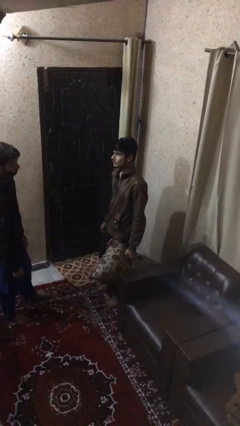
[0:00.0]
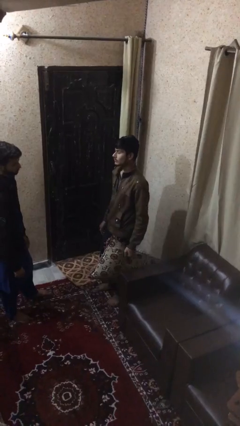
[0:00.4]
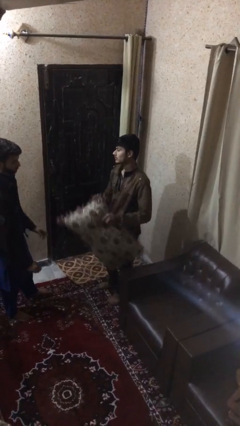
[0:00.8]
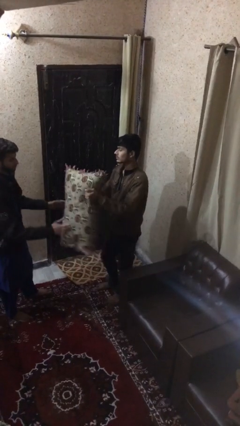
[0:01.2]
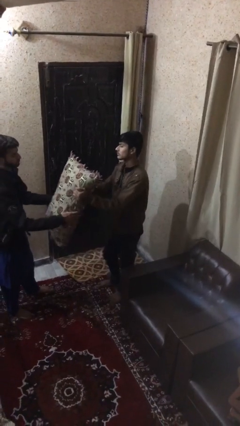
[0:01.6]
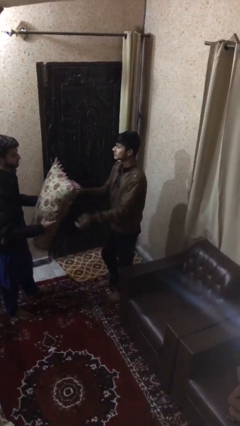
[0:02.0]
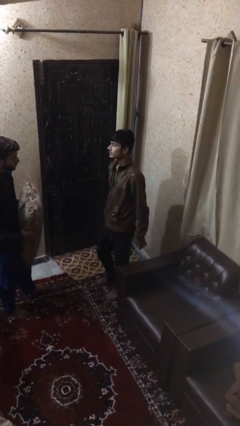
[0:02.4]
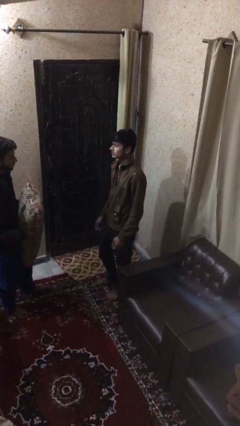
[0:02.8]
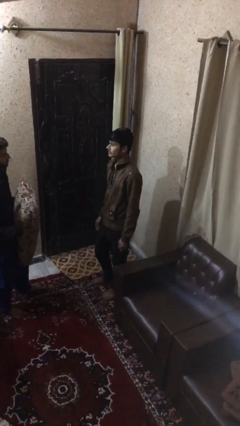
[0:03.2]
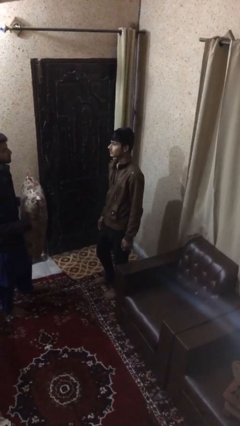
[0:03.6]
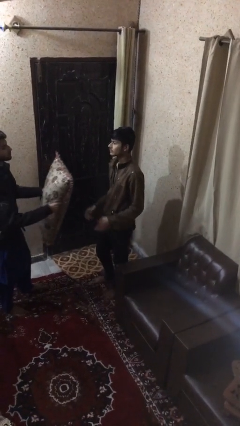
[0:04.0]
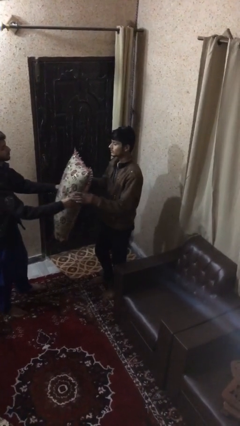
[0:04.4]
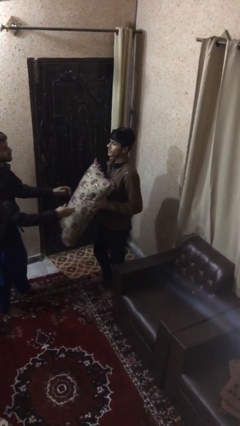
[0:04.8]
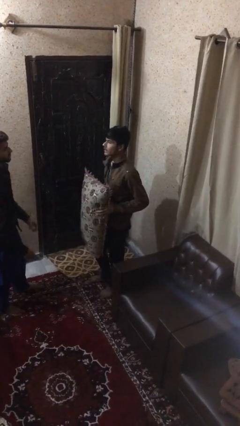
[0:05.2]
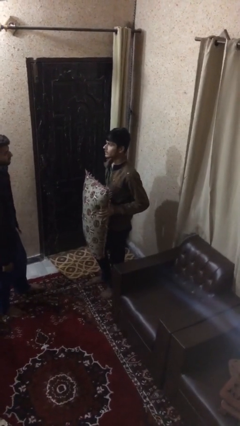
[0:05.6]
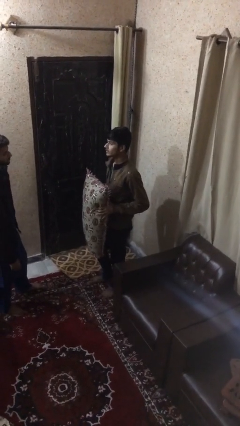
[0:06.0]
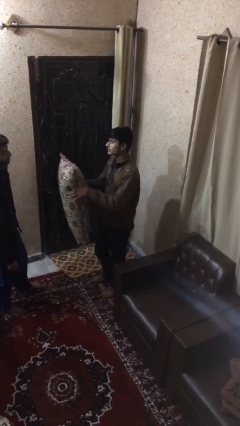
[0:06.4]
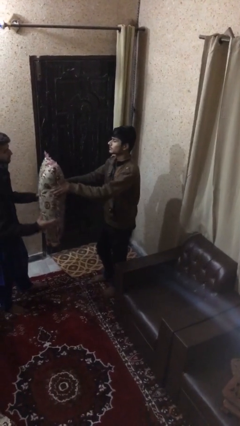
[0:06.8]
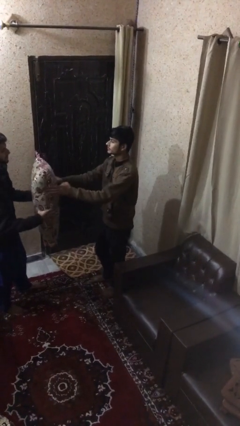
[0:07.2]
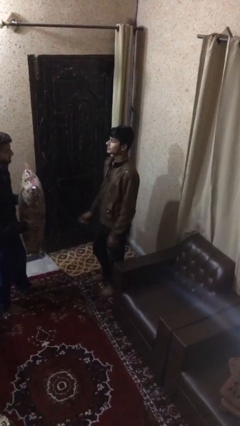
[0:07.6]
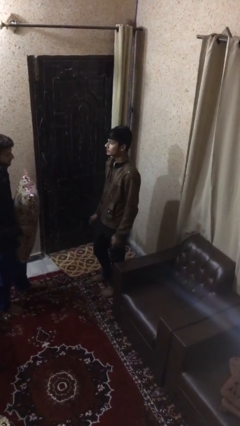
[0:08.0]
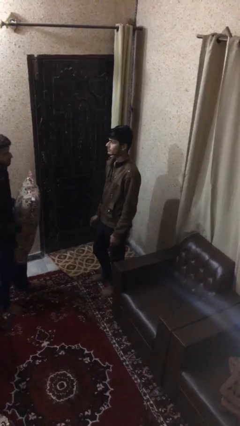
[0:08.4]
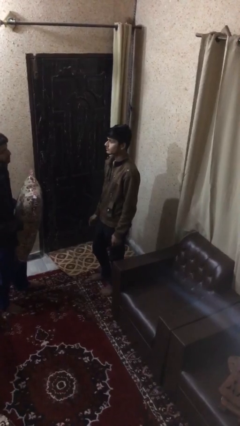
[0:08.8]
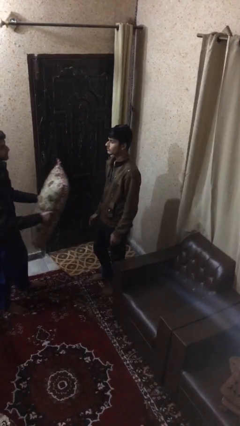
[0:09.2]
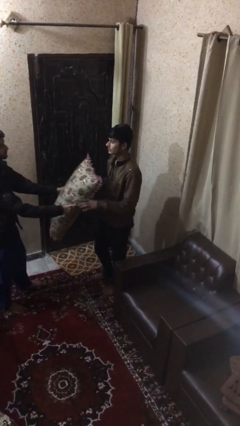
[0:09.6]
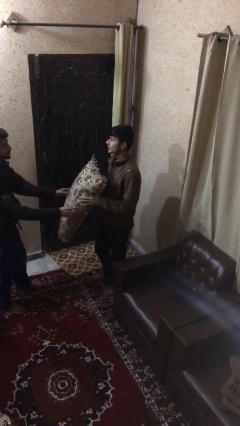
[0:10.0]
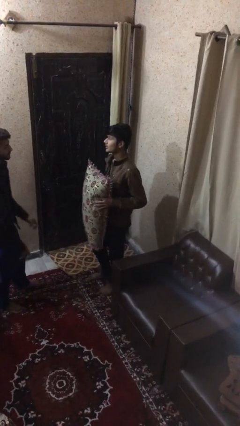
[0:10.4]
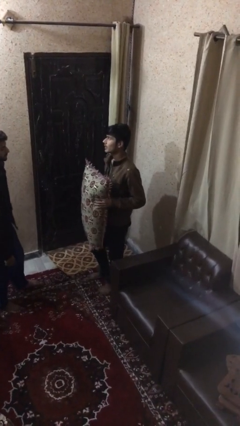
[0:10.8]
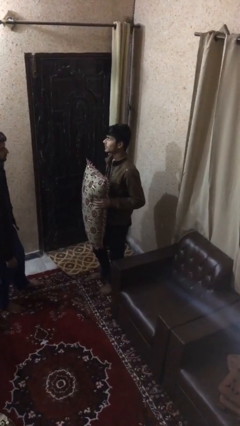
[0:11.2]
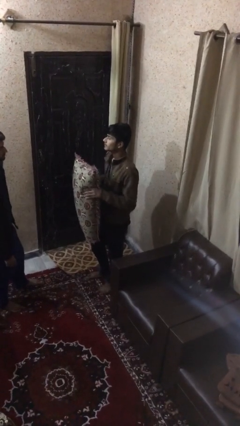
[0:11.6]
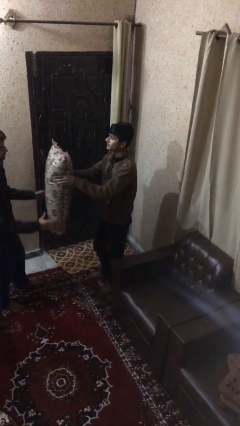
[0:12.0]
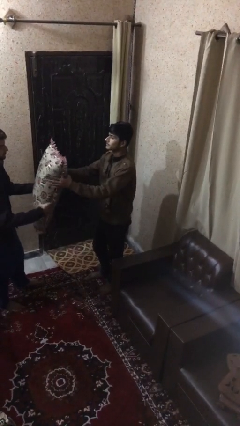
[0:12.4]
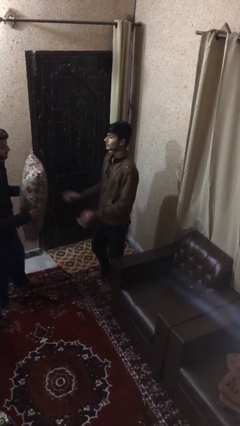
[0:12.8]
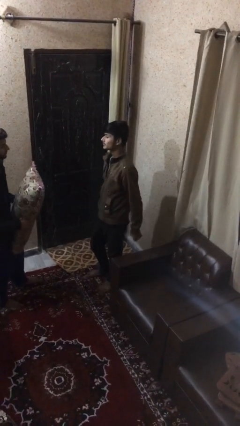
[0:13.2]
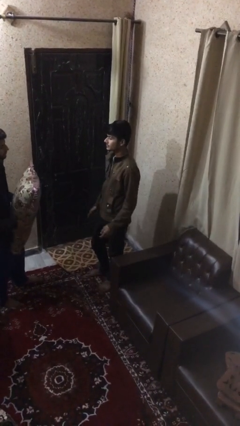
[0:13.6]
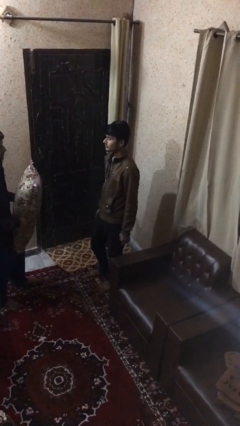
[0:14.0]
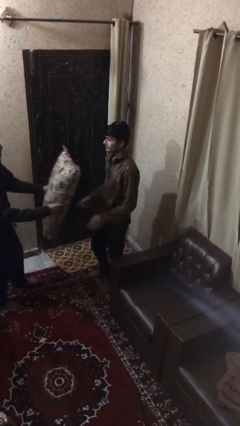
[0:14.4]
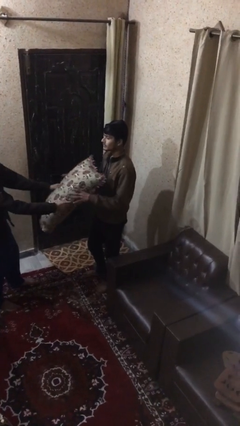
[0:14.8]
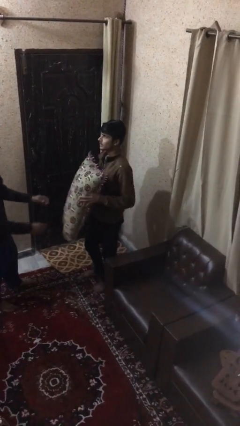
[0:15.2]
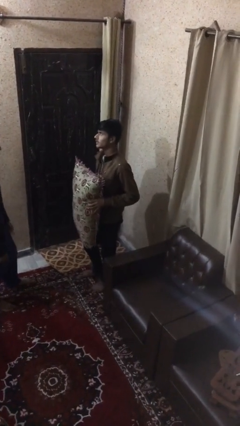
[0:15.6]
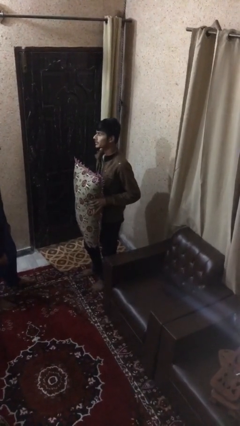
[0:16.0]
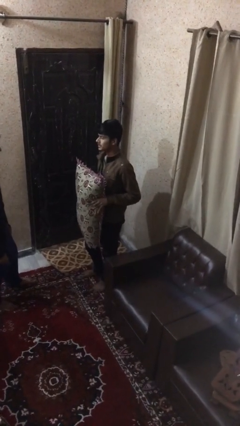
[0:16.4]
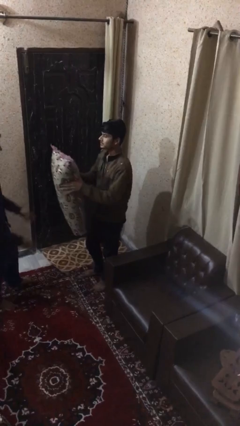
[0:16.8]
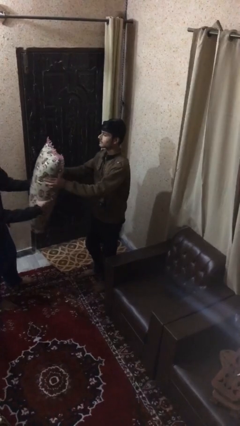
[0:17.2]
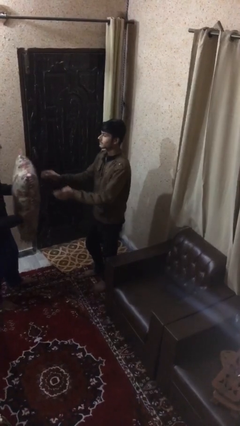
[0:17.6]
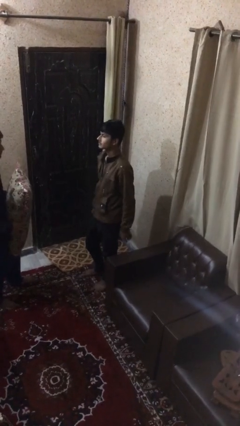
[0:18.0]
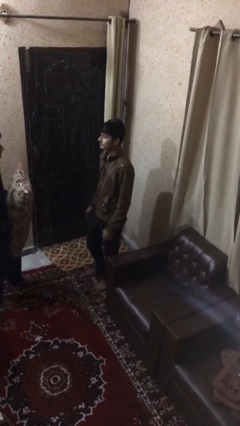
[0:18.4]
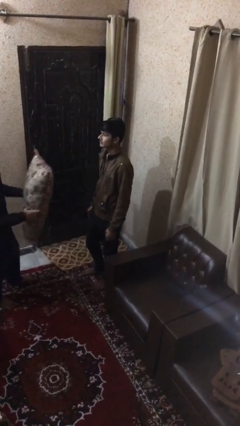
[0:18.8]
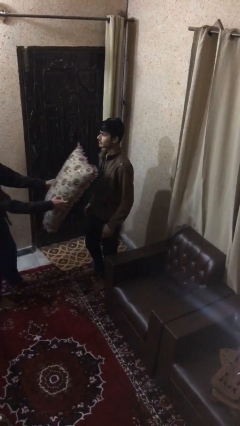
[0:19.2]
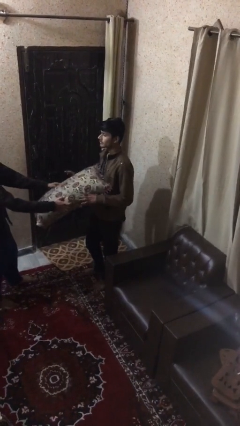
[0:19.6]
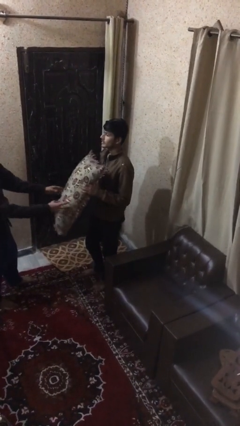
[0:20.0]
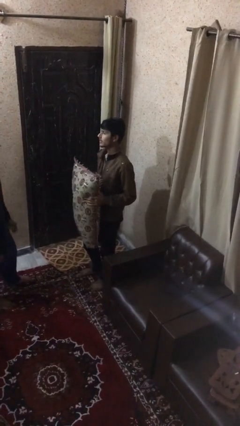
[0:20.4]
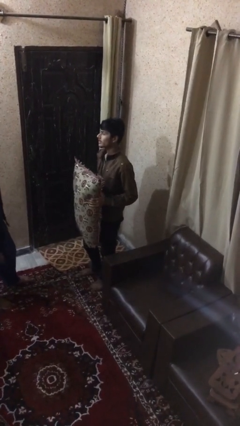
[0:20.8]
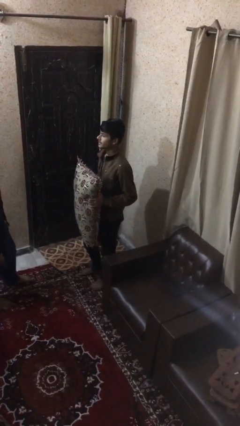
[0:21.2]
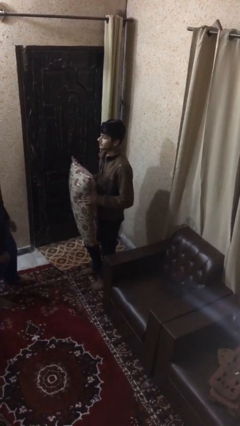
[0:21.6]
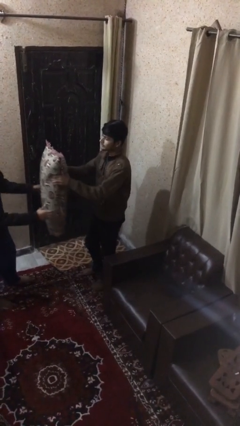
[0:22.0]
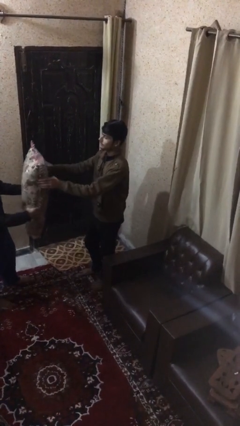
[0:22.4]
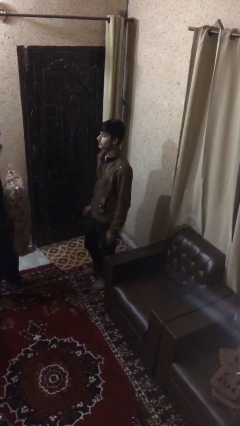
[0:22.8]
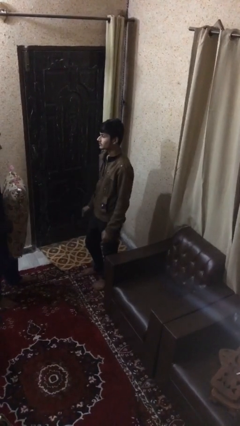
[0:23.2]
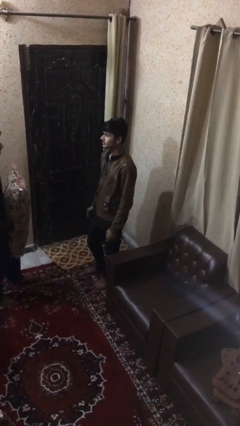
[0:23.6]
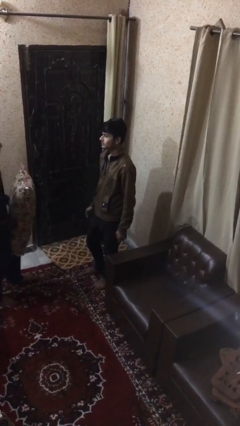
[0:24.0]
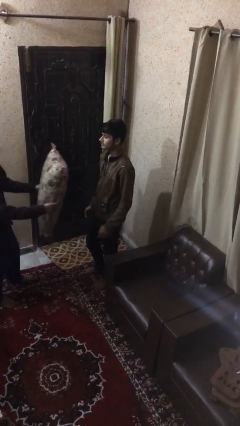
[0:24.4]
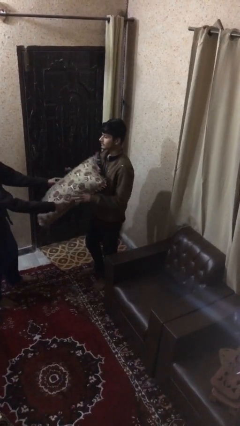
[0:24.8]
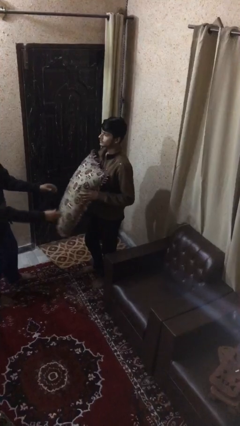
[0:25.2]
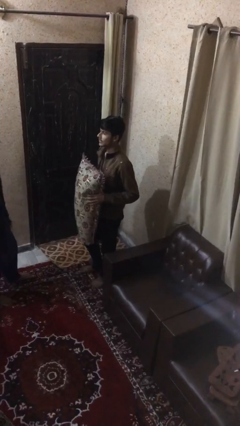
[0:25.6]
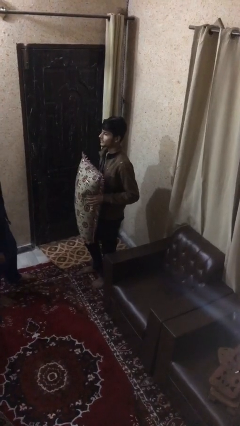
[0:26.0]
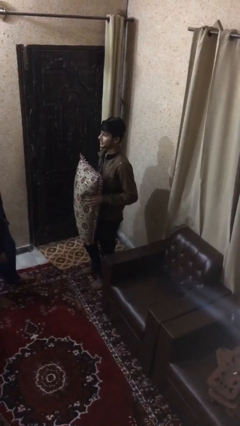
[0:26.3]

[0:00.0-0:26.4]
person transfers object to person

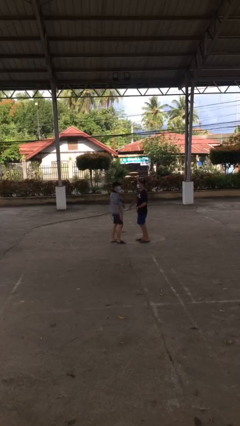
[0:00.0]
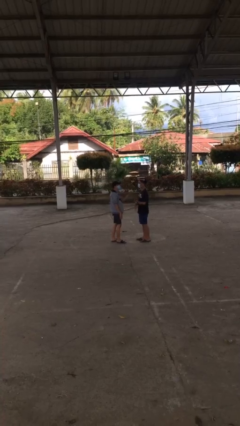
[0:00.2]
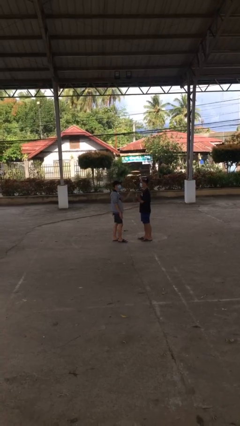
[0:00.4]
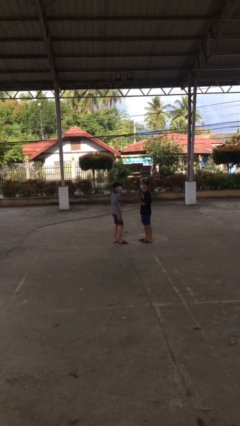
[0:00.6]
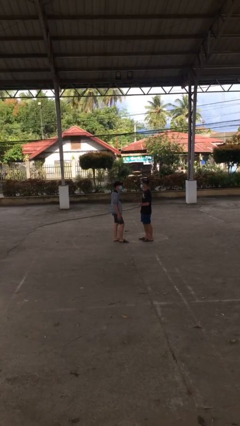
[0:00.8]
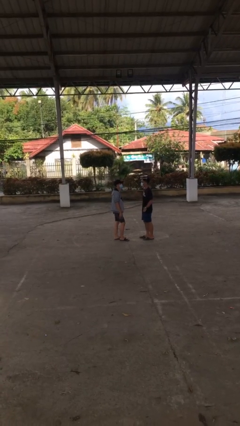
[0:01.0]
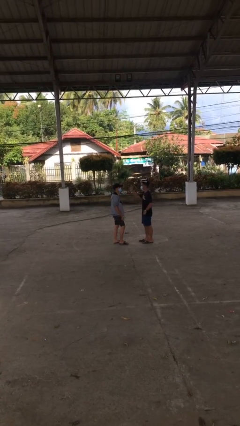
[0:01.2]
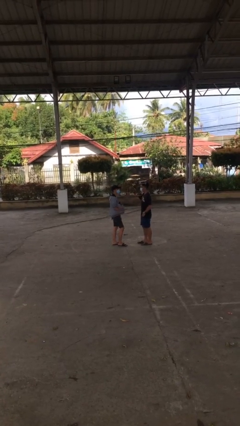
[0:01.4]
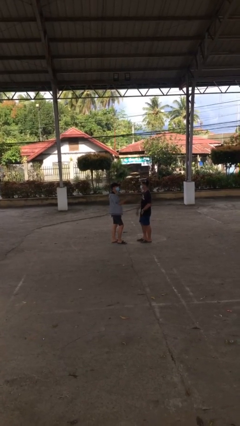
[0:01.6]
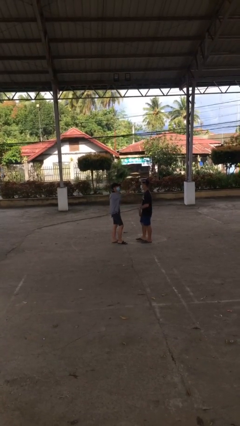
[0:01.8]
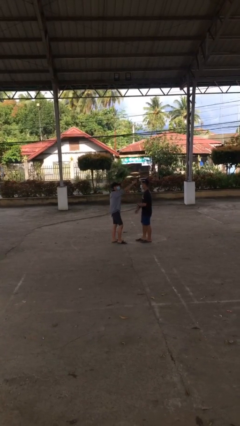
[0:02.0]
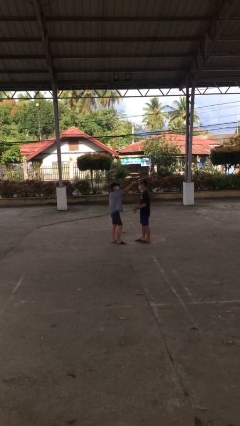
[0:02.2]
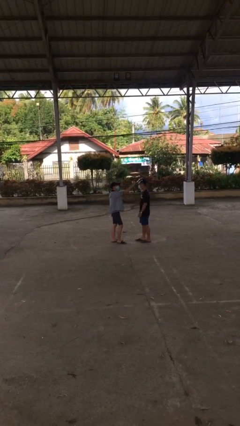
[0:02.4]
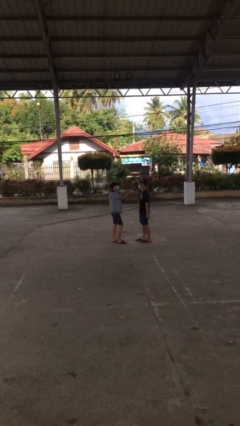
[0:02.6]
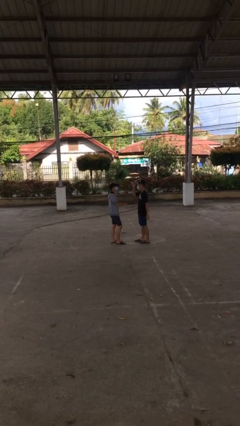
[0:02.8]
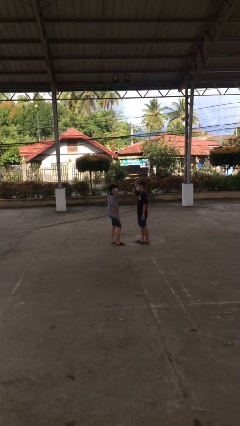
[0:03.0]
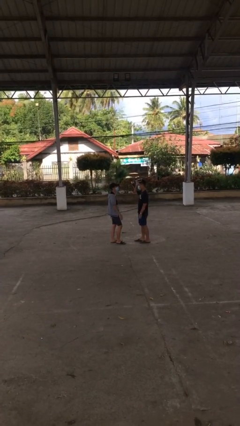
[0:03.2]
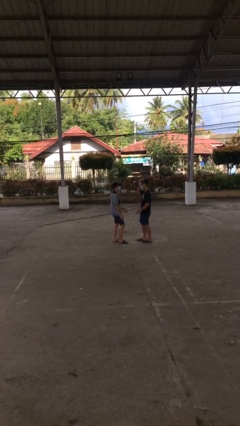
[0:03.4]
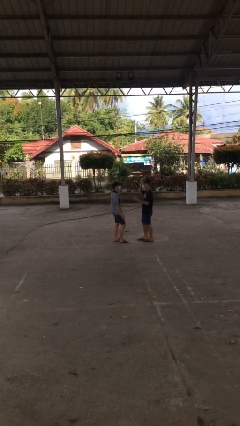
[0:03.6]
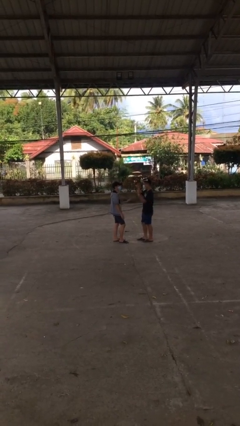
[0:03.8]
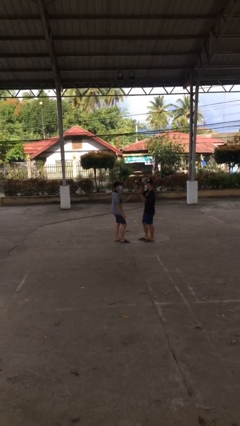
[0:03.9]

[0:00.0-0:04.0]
person talks to person

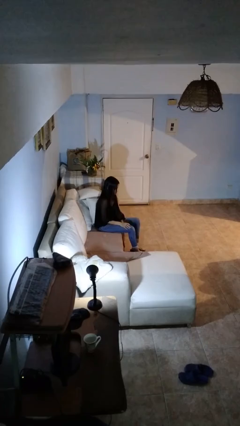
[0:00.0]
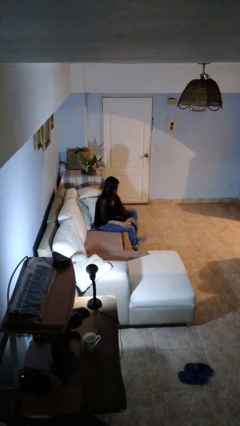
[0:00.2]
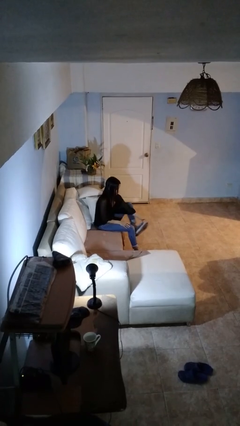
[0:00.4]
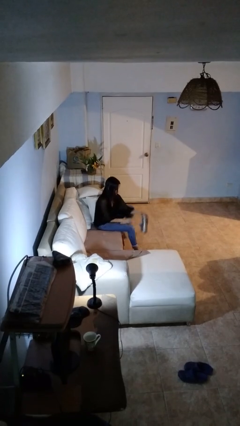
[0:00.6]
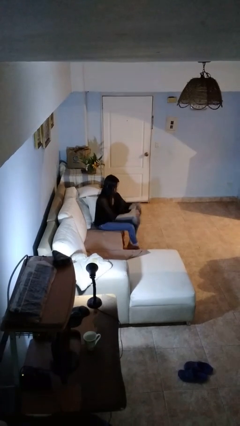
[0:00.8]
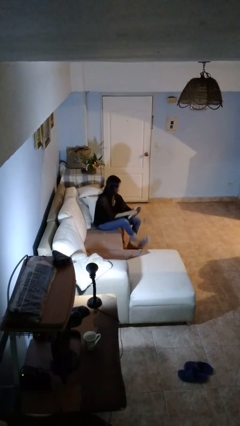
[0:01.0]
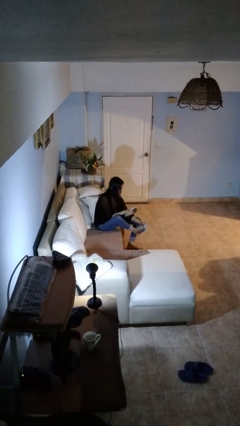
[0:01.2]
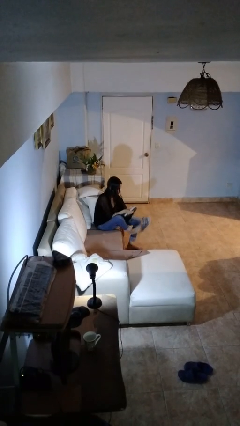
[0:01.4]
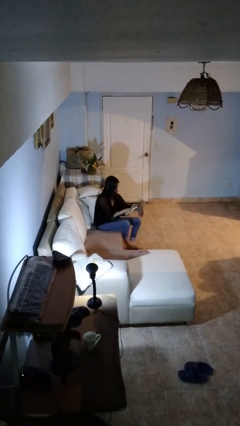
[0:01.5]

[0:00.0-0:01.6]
person takes off shoes
